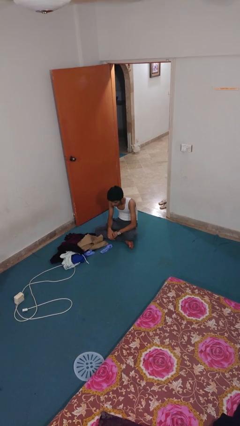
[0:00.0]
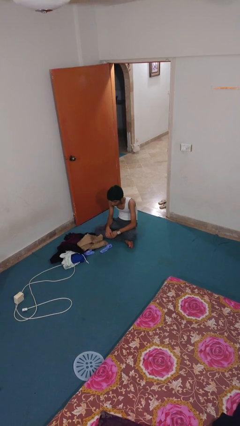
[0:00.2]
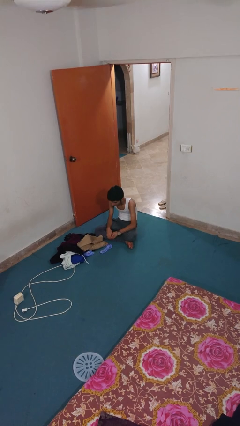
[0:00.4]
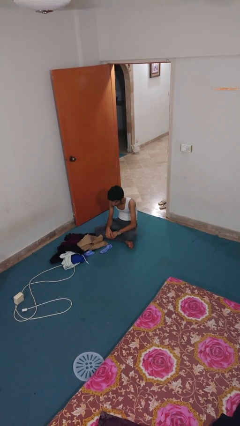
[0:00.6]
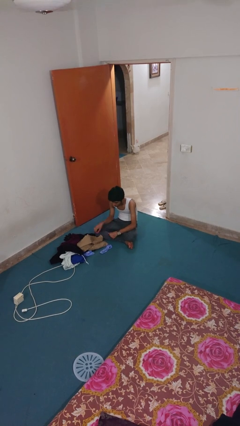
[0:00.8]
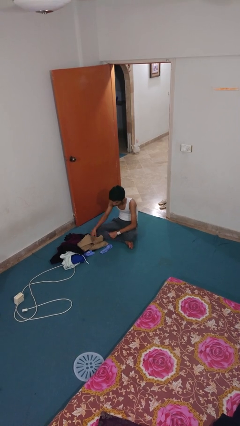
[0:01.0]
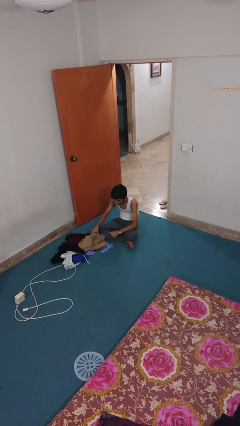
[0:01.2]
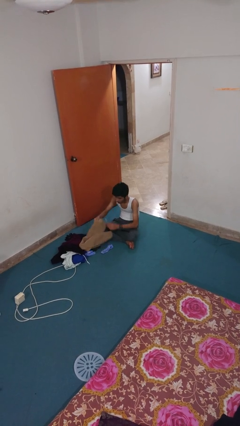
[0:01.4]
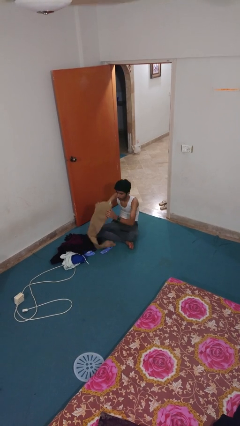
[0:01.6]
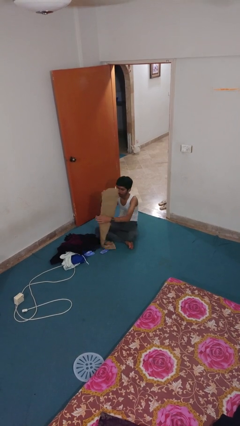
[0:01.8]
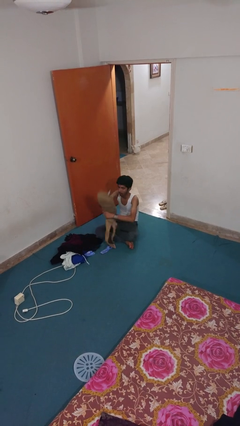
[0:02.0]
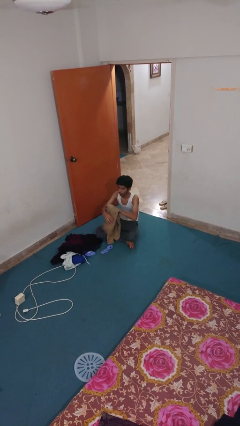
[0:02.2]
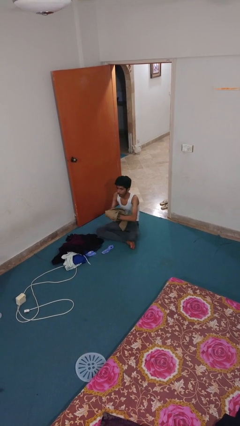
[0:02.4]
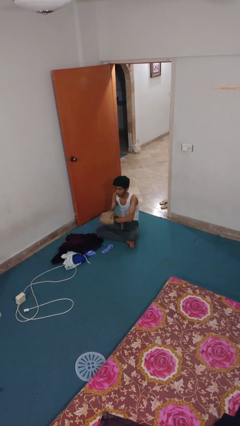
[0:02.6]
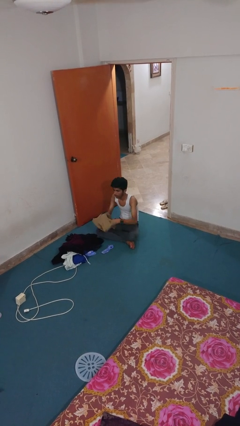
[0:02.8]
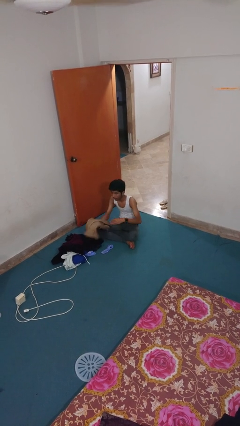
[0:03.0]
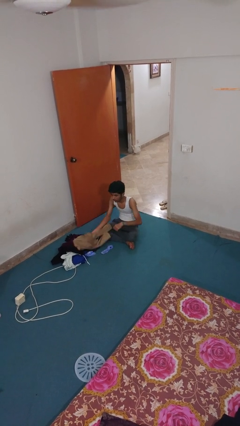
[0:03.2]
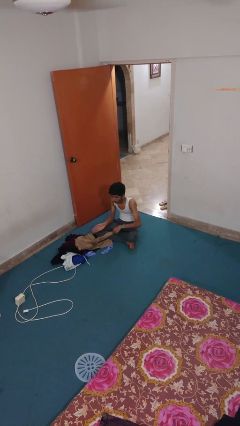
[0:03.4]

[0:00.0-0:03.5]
person folds pants

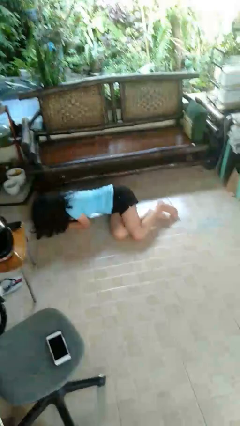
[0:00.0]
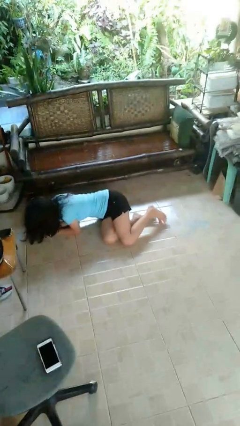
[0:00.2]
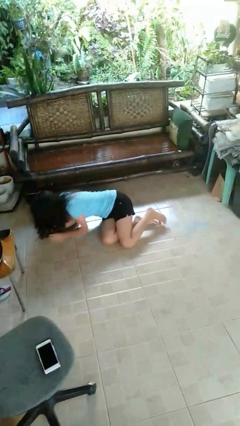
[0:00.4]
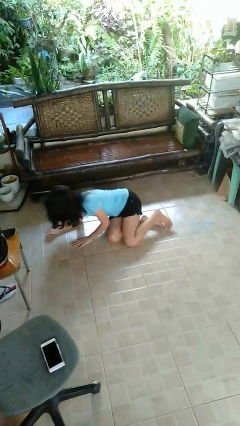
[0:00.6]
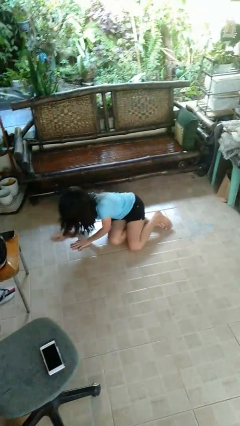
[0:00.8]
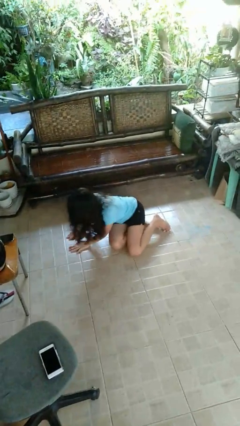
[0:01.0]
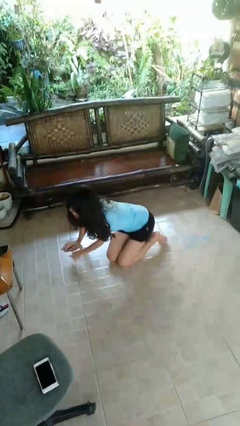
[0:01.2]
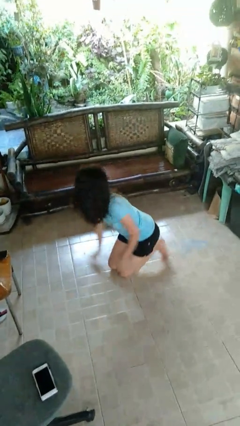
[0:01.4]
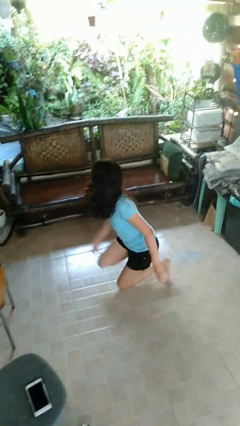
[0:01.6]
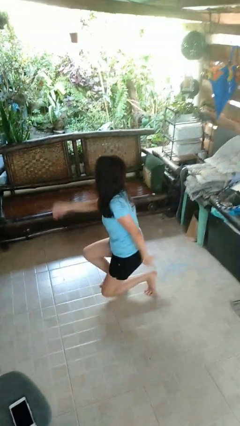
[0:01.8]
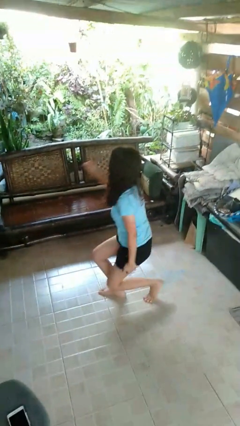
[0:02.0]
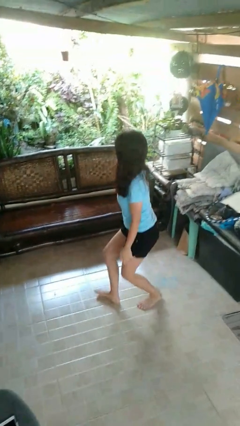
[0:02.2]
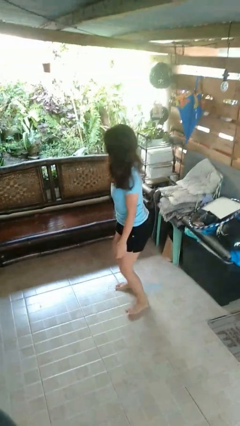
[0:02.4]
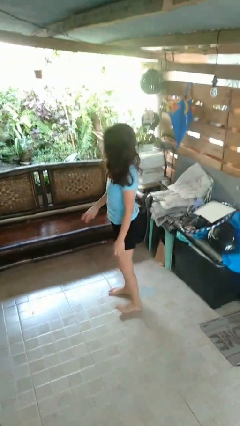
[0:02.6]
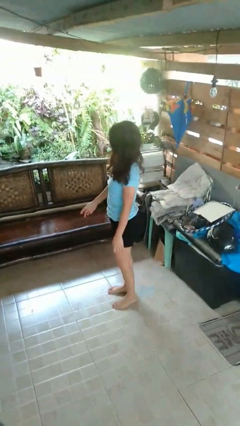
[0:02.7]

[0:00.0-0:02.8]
person stands up from floor

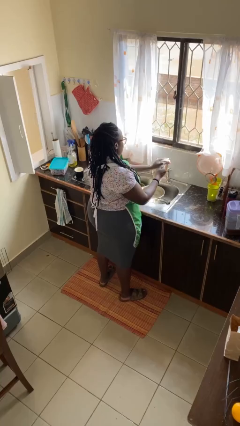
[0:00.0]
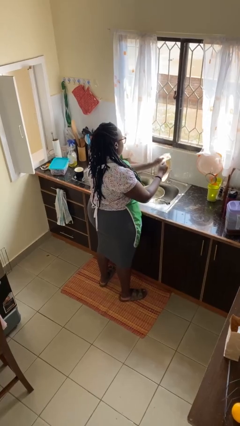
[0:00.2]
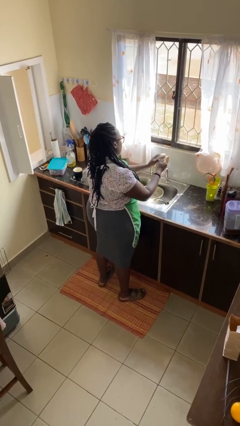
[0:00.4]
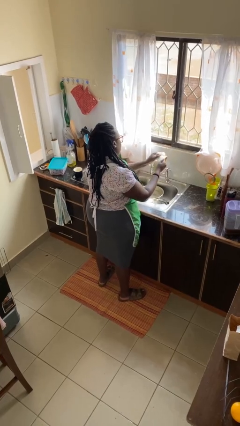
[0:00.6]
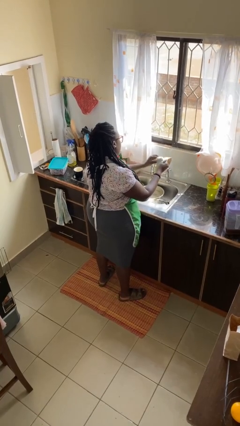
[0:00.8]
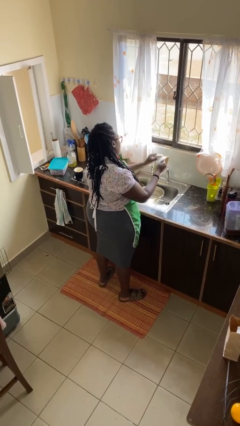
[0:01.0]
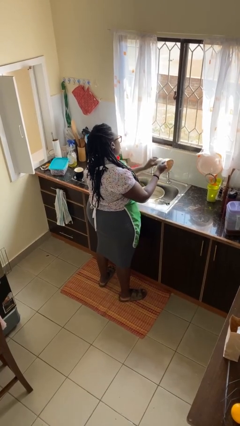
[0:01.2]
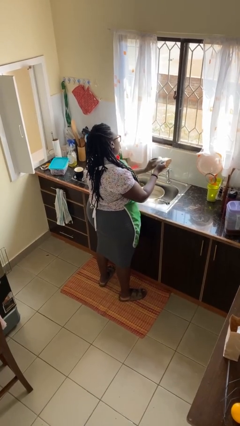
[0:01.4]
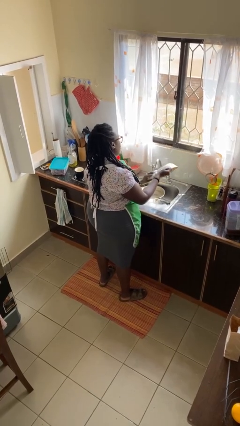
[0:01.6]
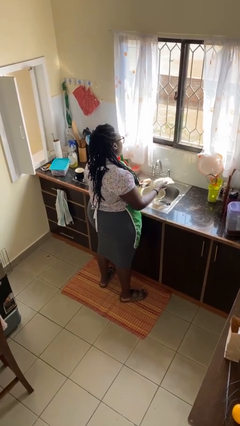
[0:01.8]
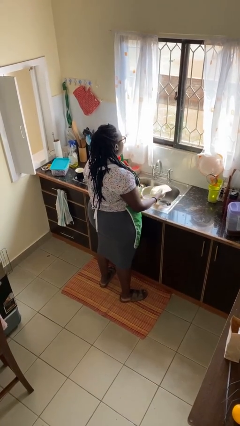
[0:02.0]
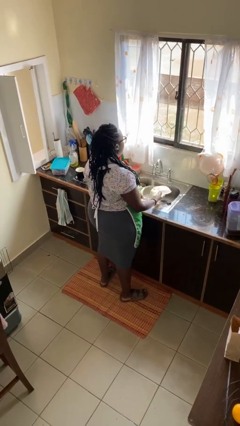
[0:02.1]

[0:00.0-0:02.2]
person washes dish

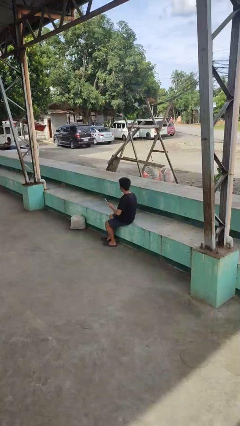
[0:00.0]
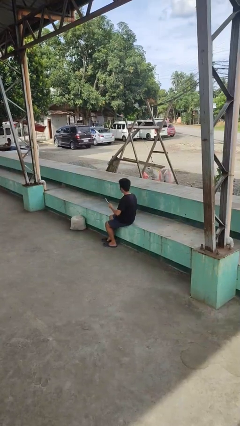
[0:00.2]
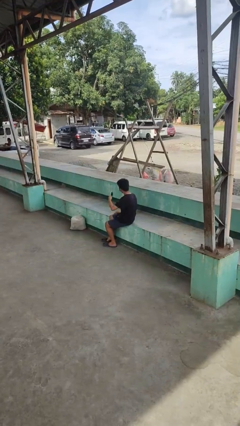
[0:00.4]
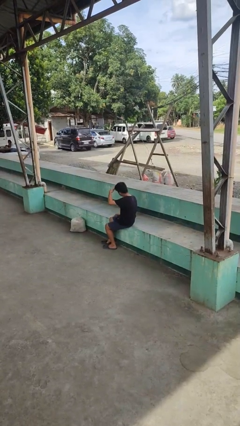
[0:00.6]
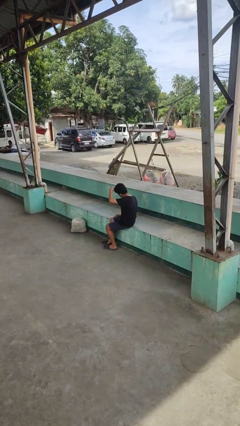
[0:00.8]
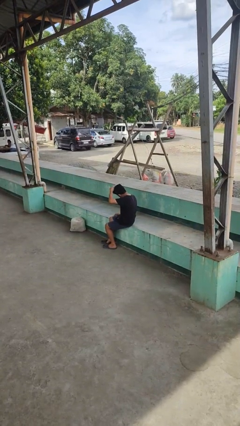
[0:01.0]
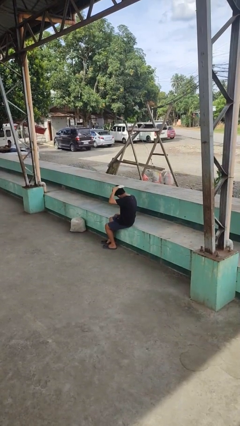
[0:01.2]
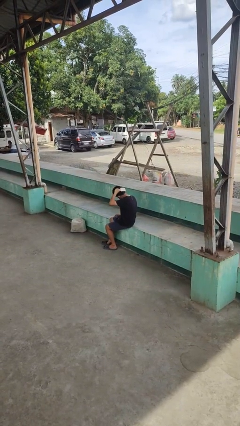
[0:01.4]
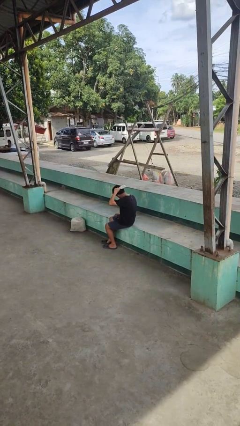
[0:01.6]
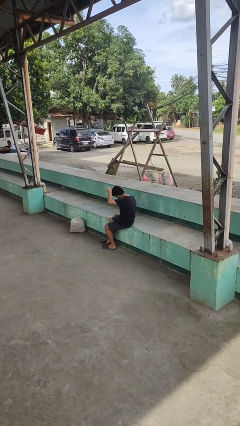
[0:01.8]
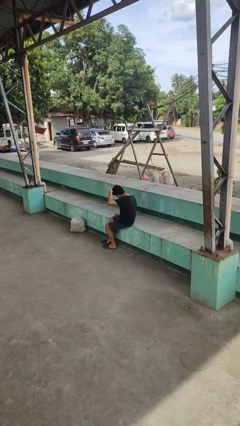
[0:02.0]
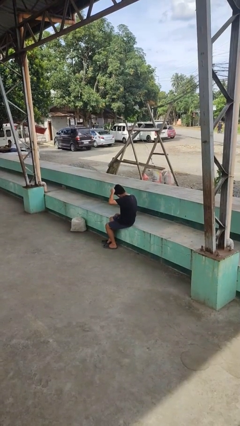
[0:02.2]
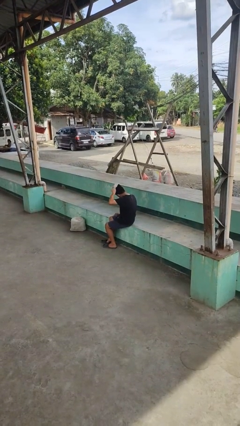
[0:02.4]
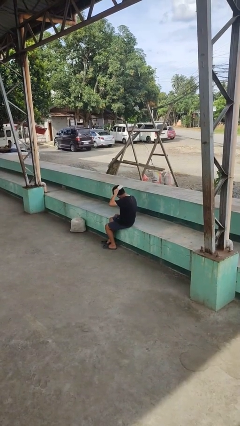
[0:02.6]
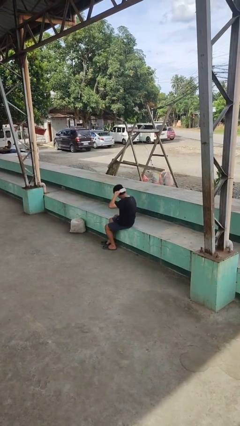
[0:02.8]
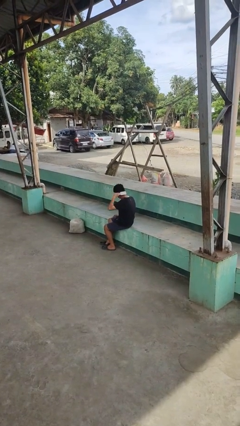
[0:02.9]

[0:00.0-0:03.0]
person brushes hair

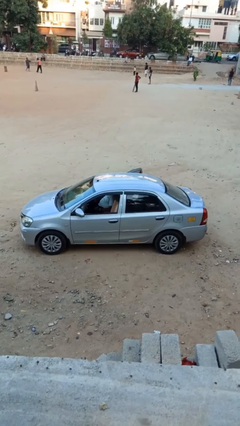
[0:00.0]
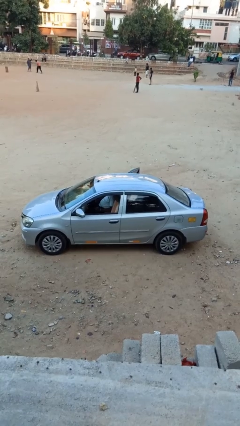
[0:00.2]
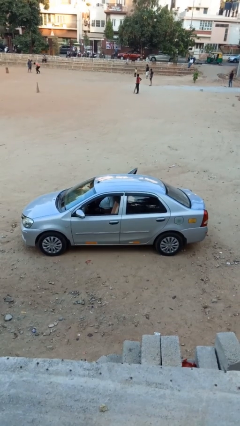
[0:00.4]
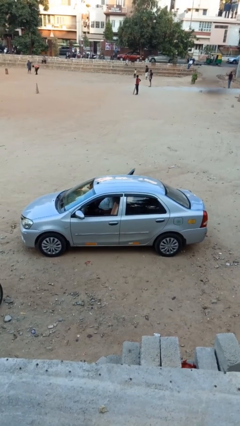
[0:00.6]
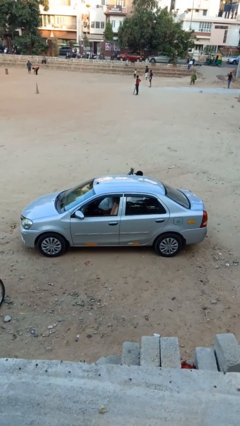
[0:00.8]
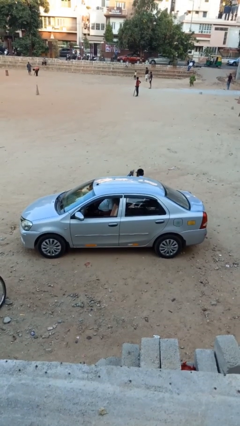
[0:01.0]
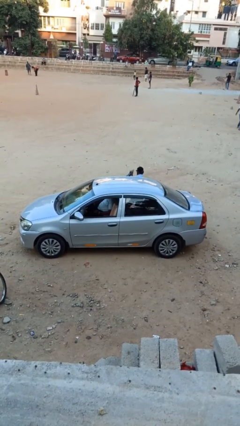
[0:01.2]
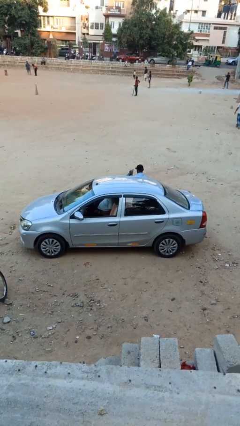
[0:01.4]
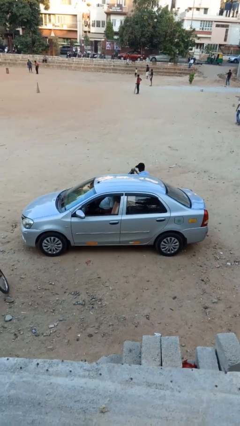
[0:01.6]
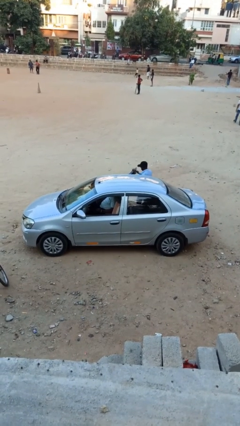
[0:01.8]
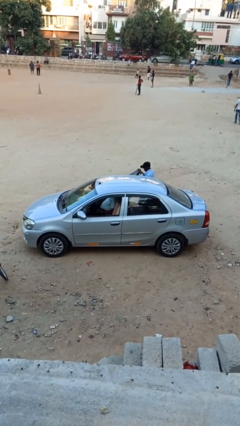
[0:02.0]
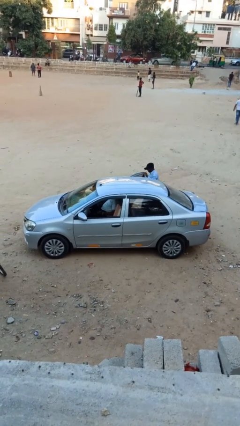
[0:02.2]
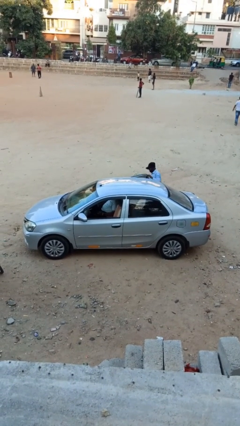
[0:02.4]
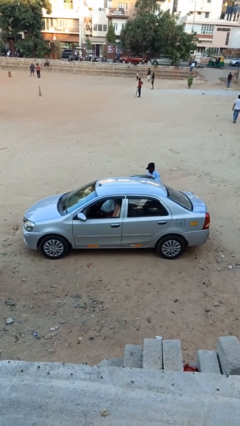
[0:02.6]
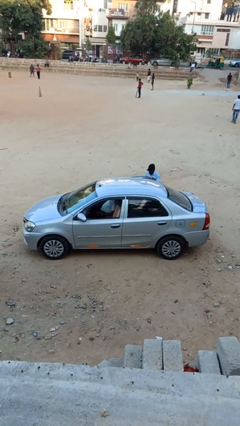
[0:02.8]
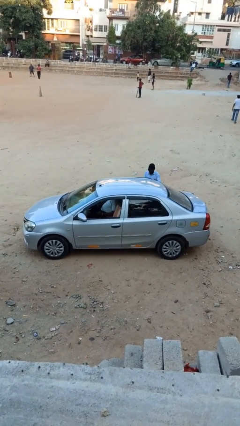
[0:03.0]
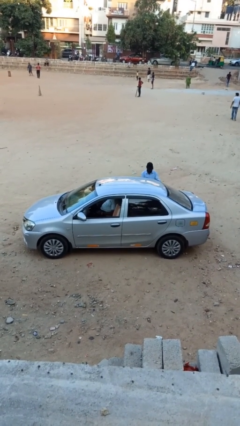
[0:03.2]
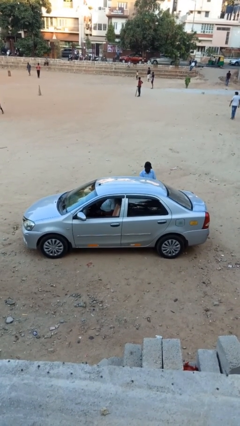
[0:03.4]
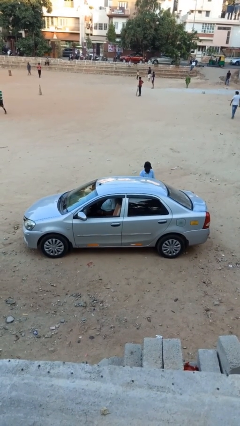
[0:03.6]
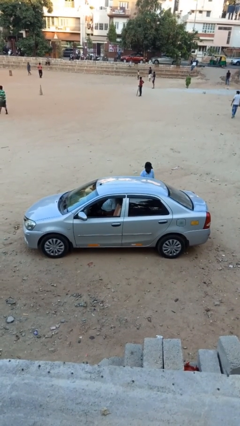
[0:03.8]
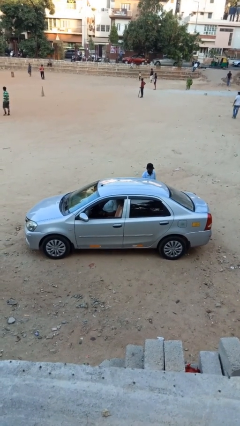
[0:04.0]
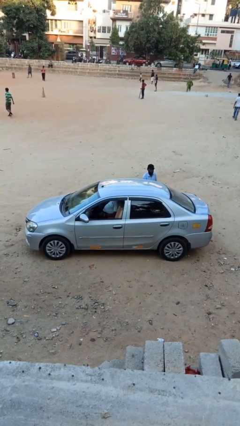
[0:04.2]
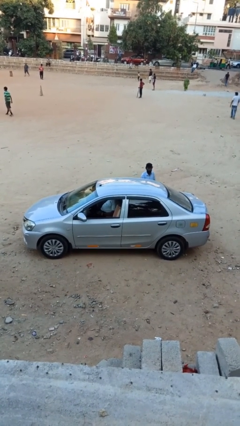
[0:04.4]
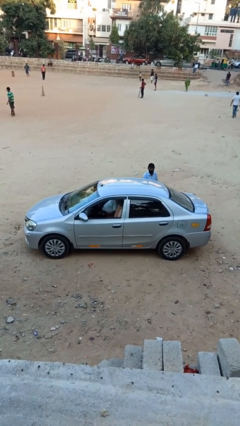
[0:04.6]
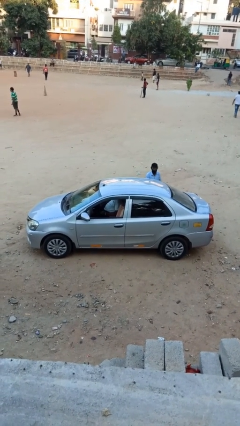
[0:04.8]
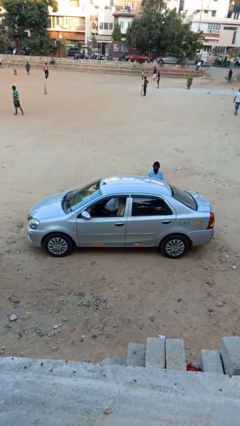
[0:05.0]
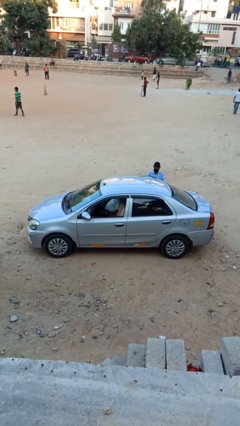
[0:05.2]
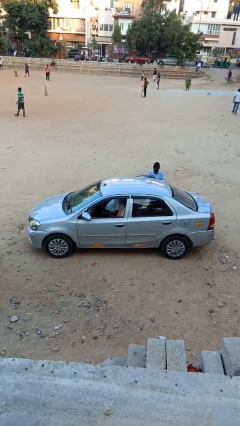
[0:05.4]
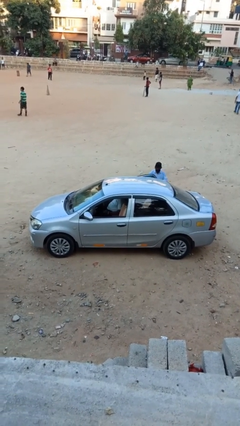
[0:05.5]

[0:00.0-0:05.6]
car drops off person

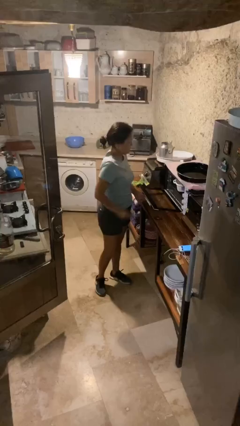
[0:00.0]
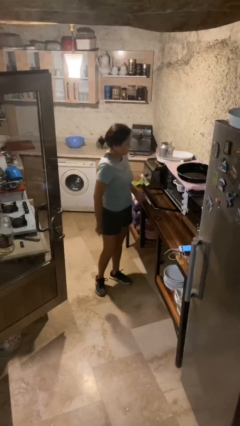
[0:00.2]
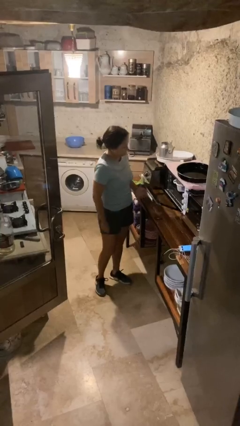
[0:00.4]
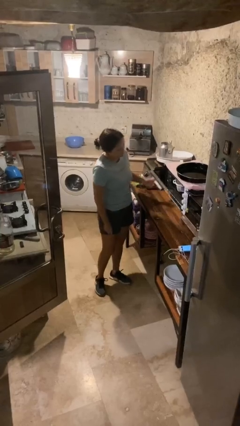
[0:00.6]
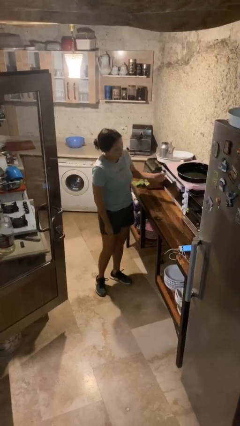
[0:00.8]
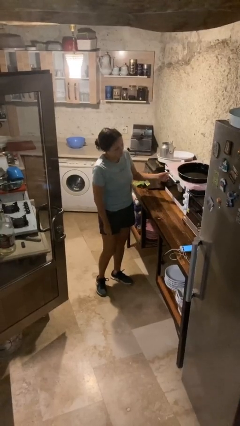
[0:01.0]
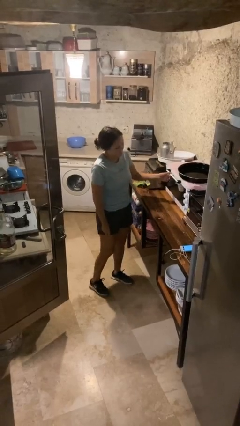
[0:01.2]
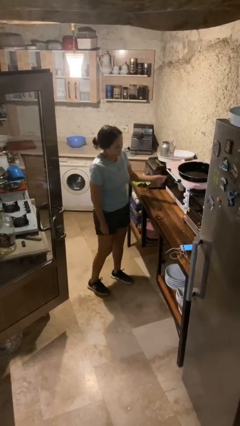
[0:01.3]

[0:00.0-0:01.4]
person closes microwave
